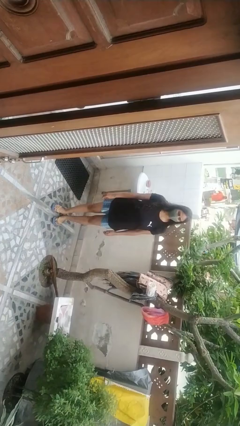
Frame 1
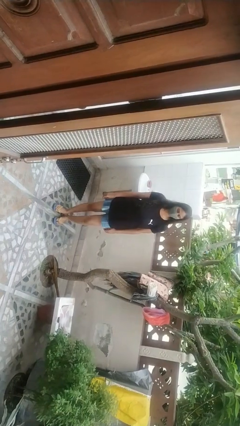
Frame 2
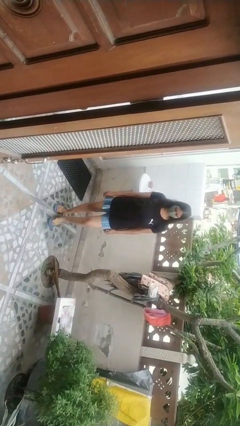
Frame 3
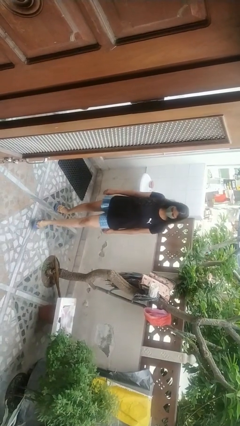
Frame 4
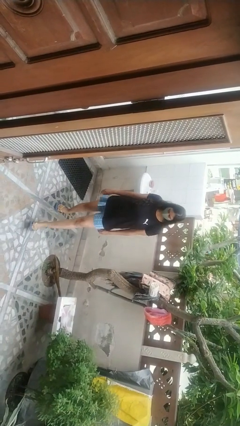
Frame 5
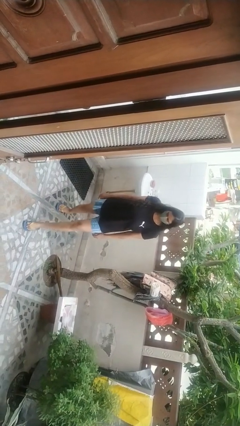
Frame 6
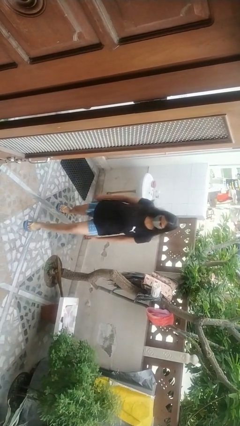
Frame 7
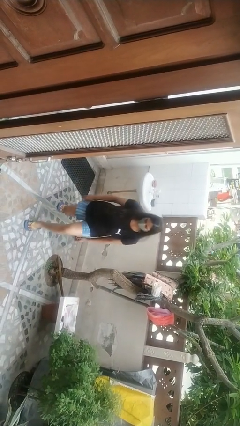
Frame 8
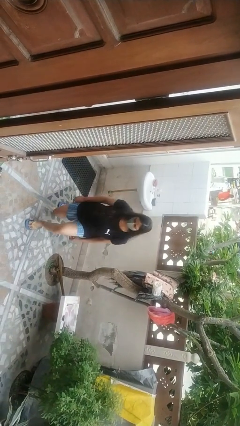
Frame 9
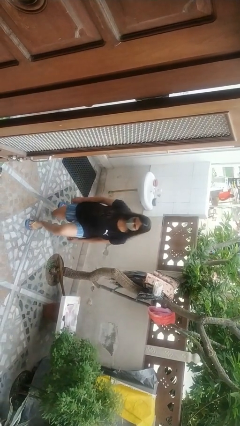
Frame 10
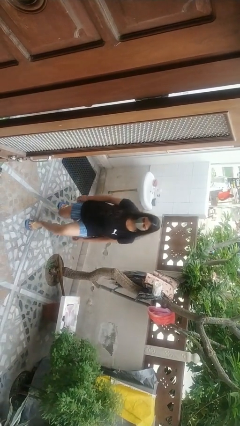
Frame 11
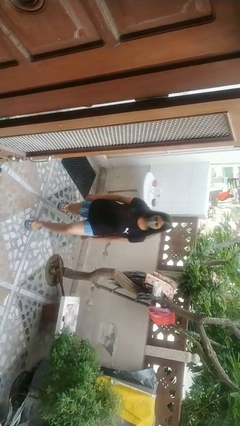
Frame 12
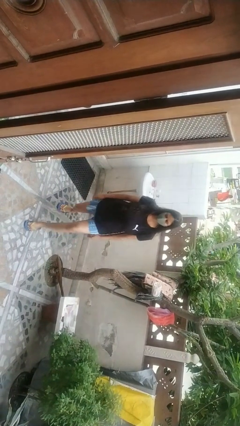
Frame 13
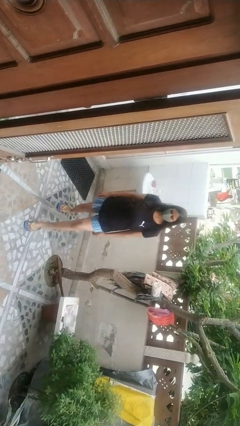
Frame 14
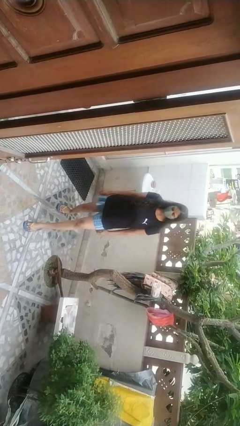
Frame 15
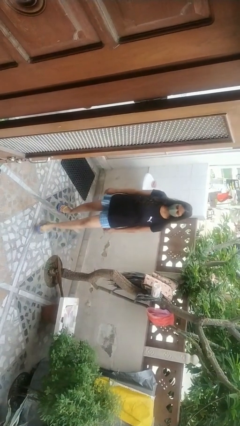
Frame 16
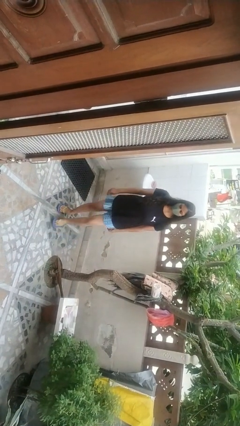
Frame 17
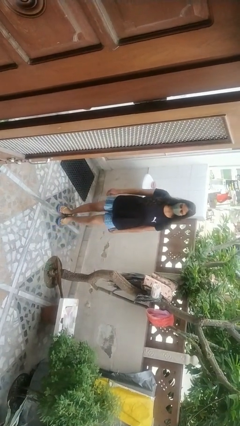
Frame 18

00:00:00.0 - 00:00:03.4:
person exercises with lunges

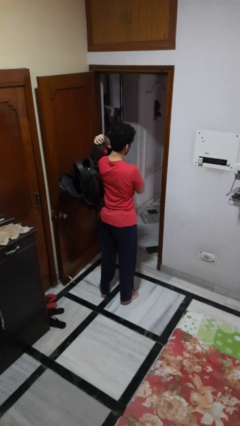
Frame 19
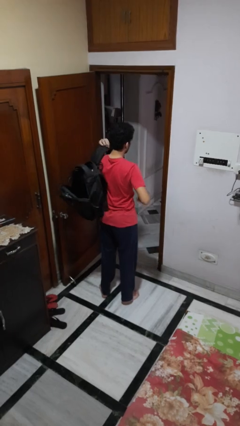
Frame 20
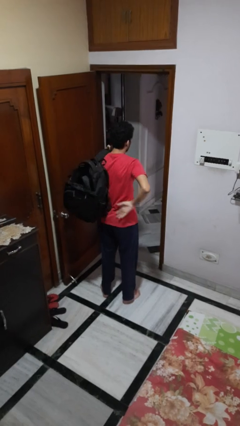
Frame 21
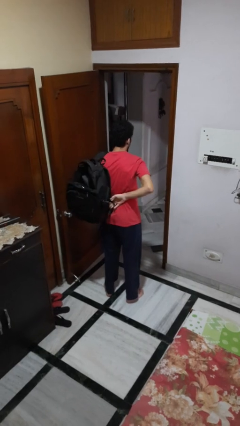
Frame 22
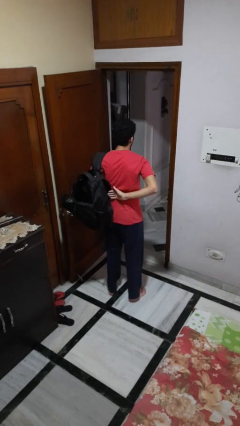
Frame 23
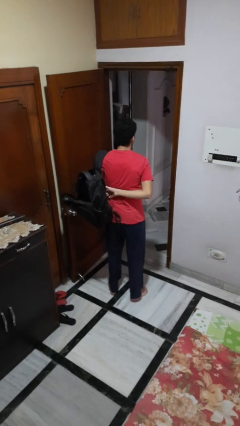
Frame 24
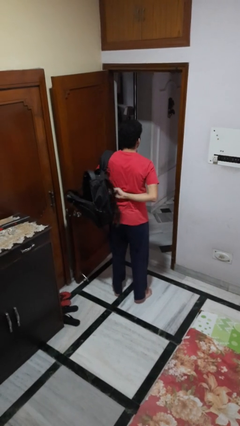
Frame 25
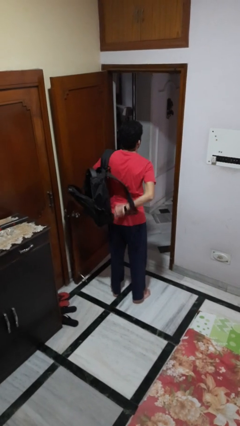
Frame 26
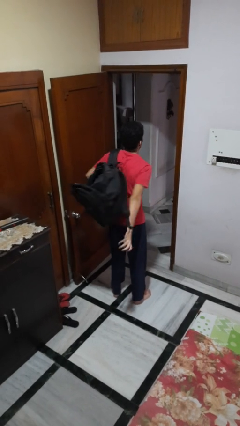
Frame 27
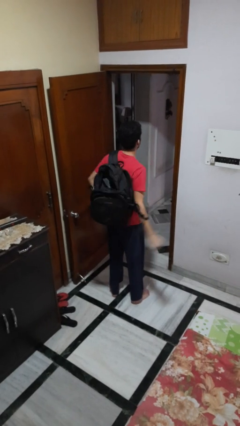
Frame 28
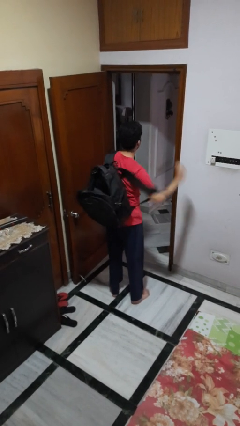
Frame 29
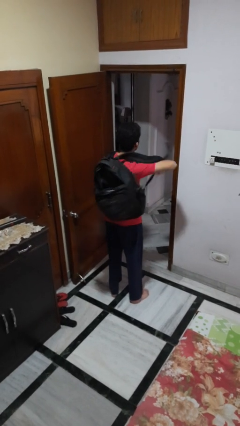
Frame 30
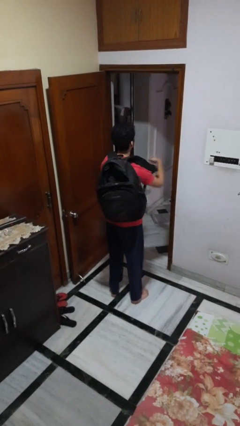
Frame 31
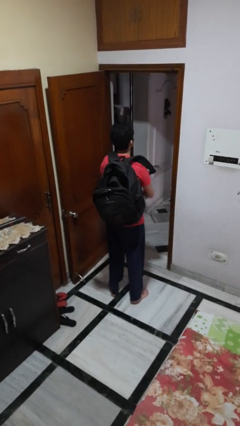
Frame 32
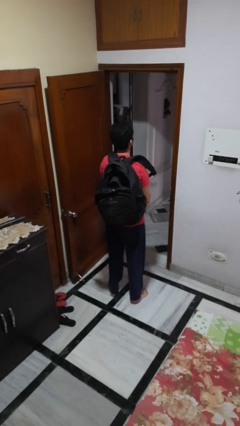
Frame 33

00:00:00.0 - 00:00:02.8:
person puts on backpack

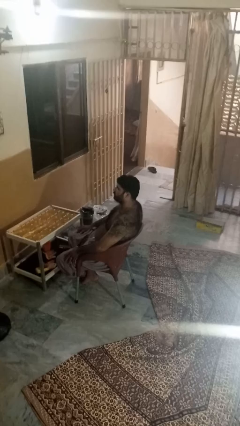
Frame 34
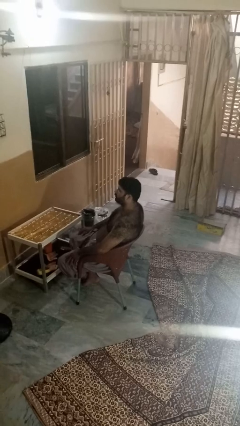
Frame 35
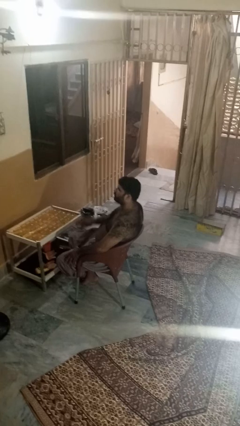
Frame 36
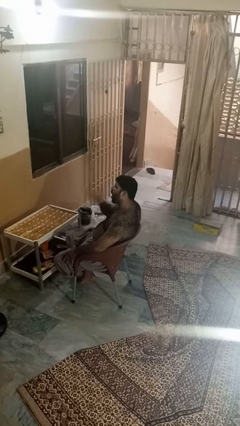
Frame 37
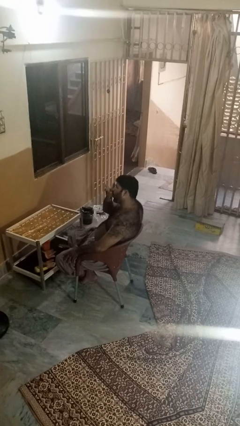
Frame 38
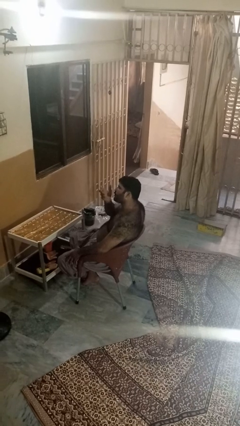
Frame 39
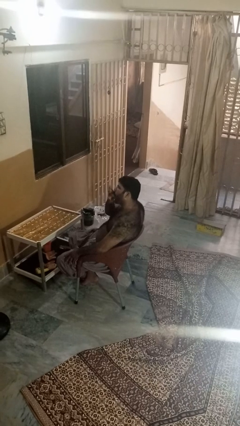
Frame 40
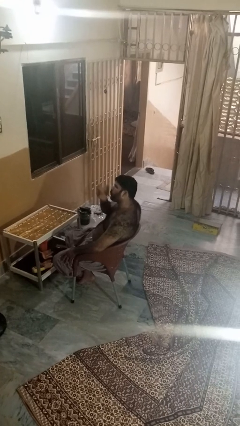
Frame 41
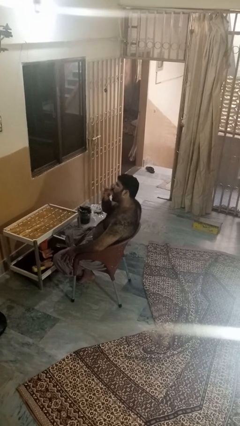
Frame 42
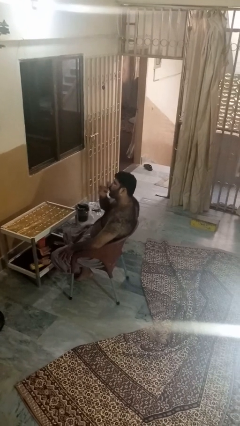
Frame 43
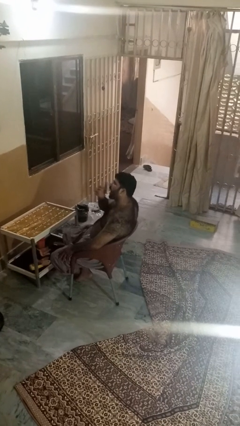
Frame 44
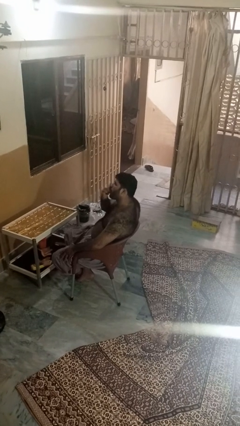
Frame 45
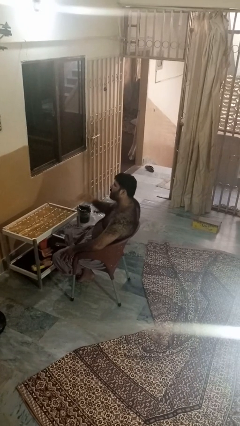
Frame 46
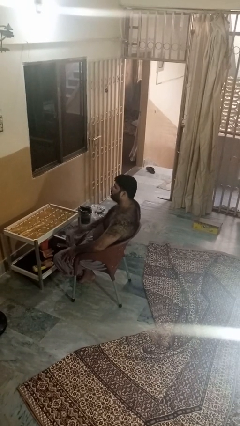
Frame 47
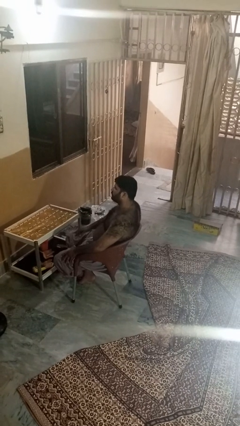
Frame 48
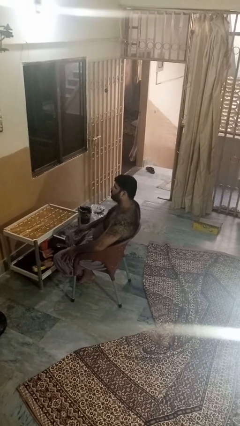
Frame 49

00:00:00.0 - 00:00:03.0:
person licks fingers

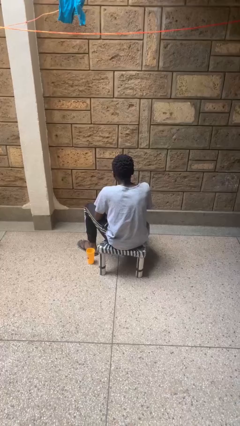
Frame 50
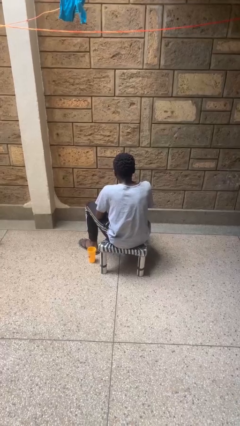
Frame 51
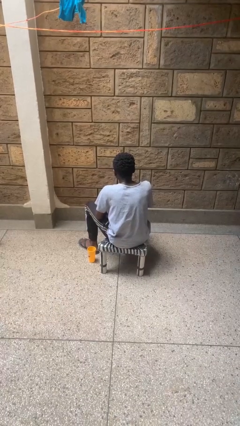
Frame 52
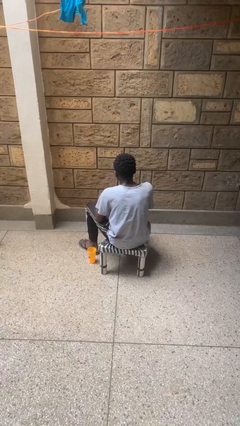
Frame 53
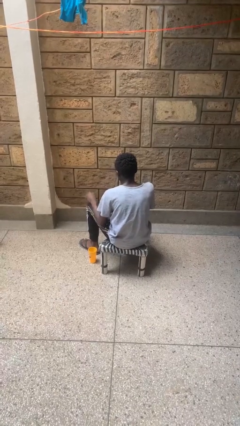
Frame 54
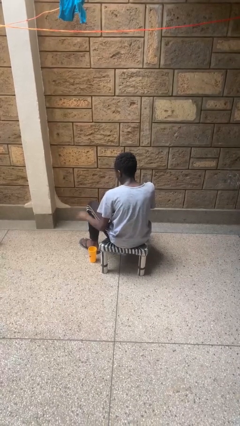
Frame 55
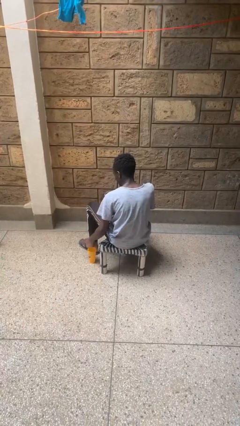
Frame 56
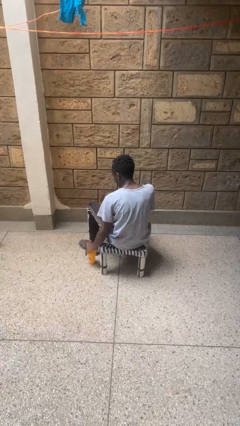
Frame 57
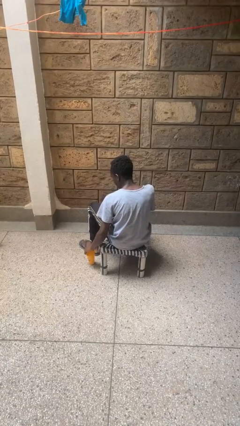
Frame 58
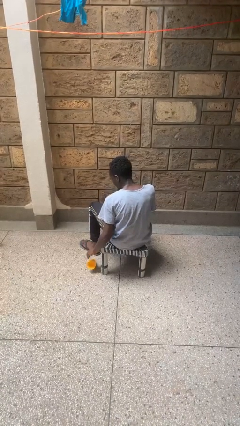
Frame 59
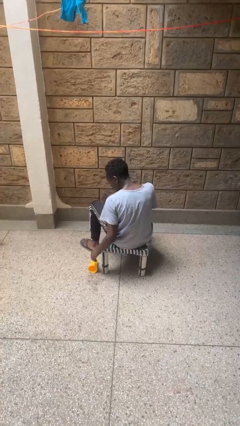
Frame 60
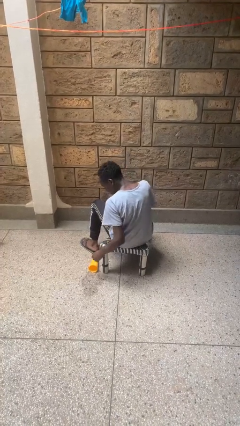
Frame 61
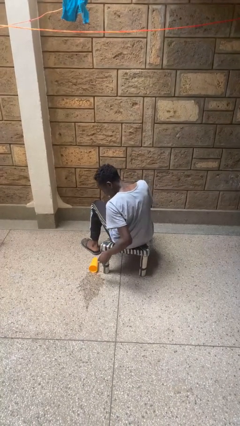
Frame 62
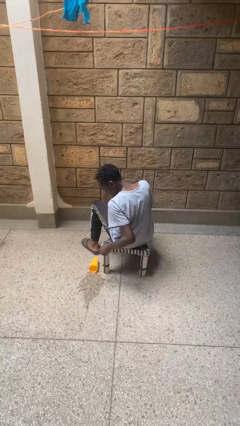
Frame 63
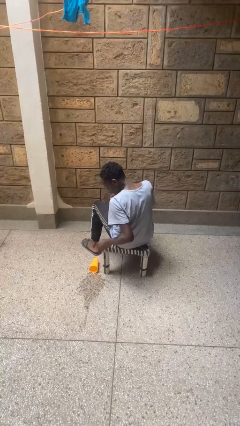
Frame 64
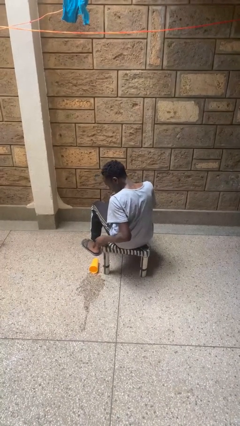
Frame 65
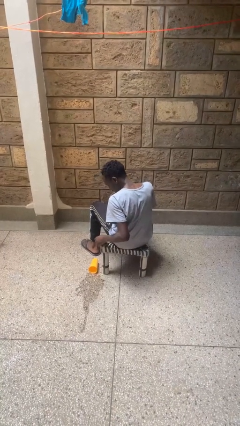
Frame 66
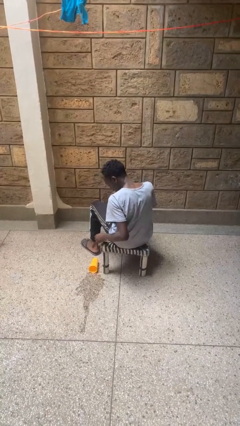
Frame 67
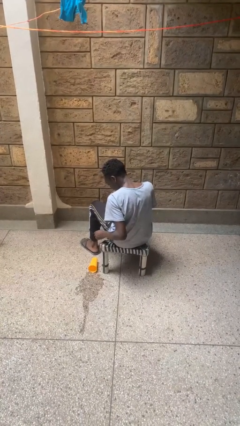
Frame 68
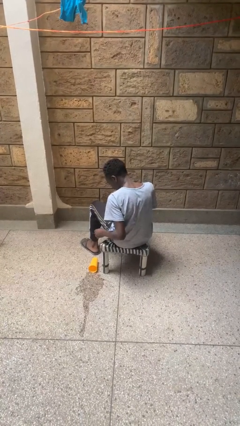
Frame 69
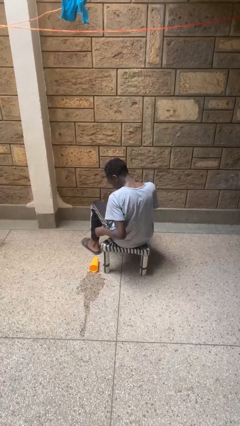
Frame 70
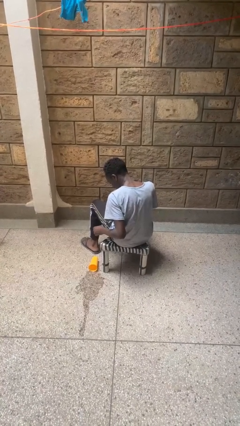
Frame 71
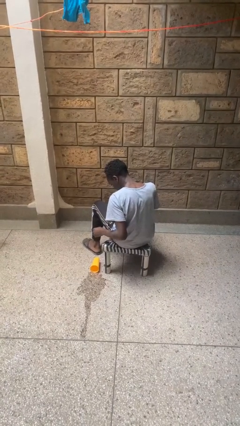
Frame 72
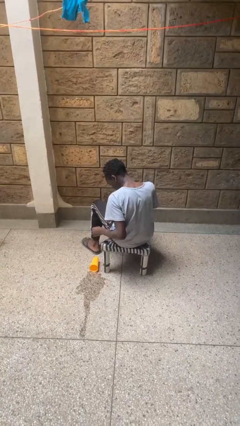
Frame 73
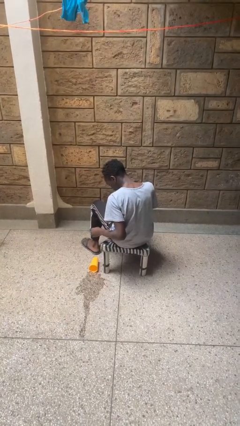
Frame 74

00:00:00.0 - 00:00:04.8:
person spills on floor

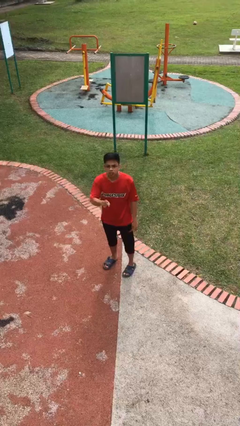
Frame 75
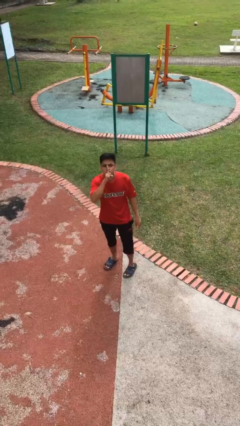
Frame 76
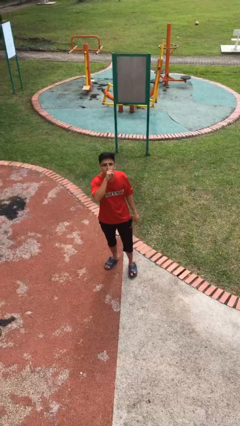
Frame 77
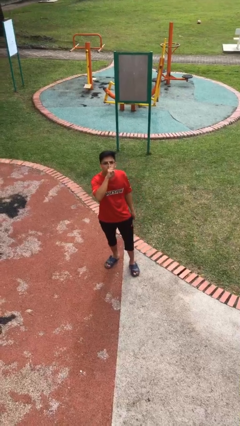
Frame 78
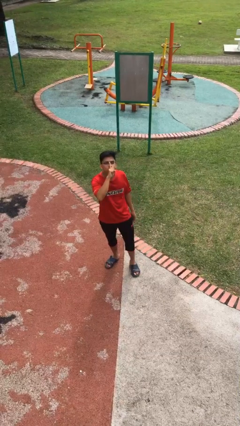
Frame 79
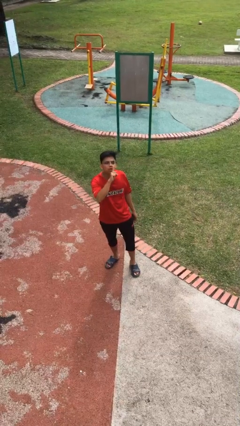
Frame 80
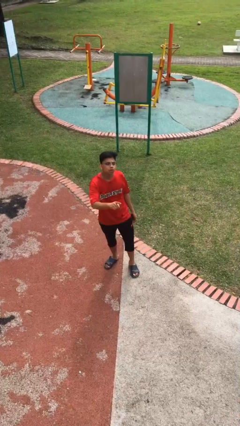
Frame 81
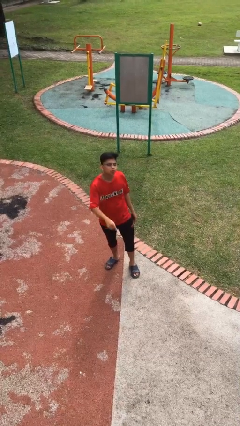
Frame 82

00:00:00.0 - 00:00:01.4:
person gestures be quiet

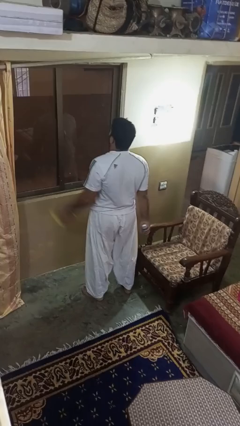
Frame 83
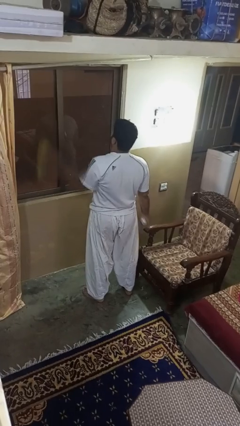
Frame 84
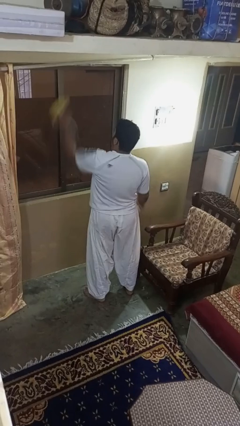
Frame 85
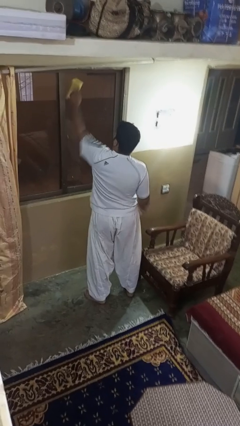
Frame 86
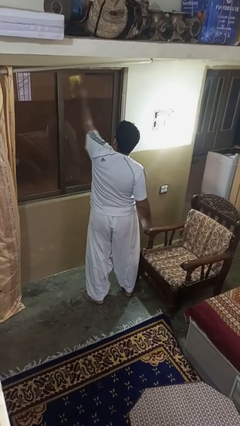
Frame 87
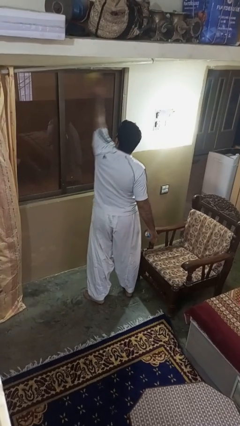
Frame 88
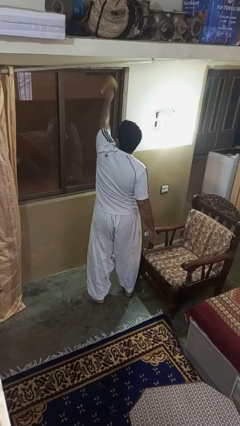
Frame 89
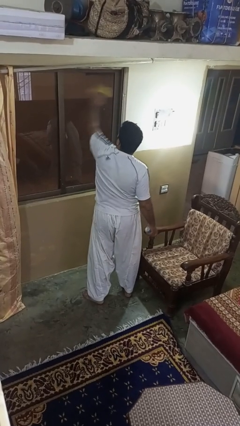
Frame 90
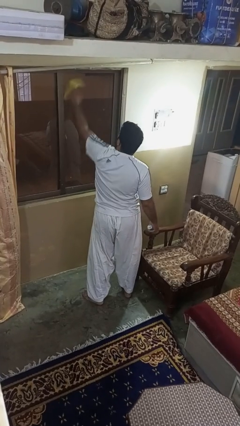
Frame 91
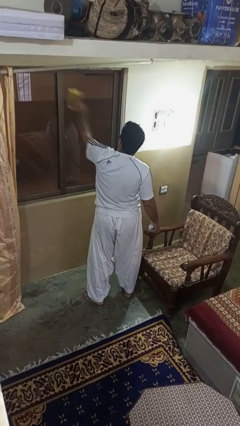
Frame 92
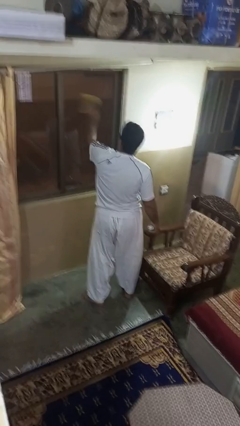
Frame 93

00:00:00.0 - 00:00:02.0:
person washes window
